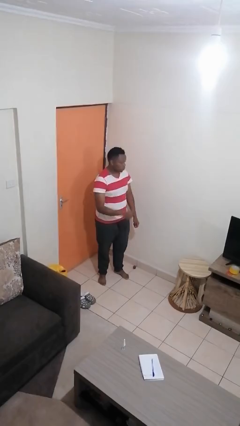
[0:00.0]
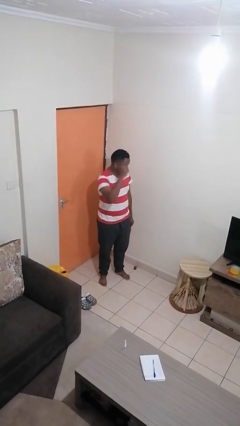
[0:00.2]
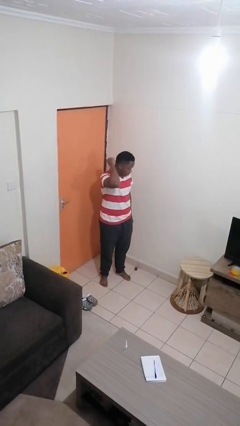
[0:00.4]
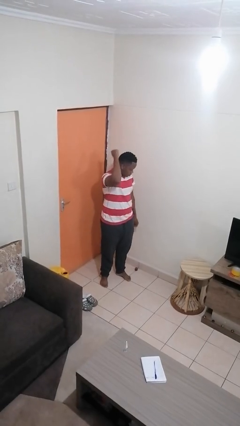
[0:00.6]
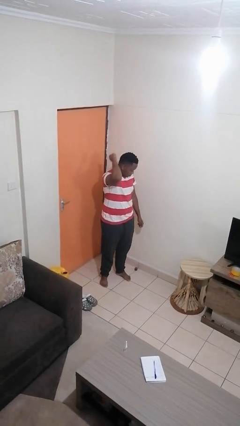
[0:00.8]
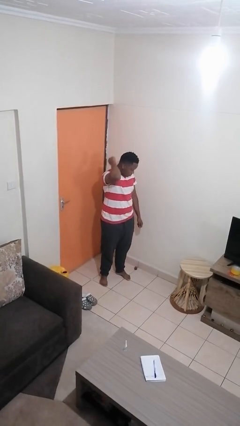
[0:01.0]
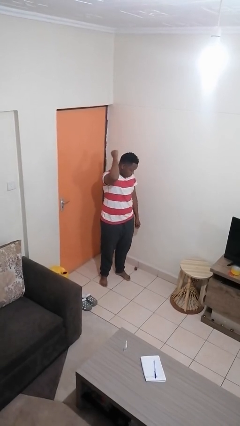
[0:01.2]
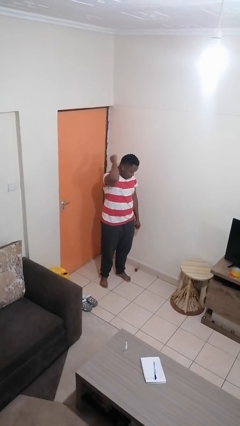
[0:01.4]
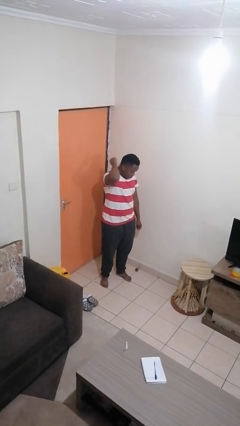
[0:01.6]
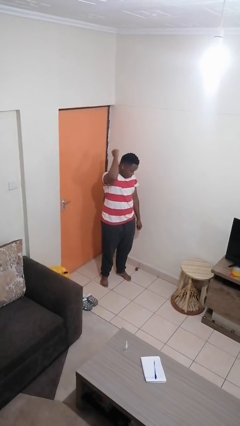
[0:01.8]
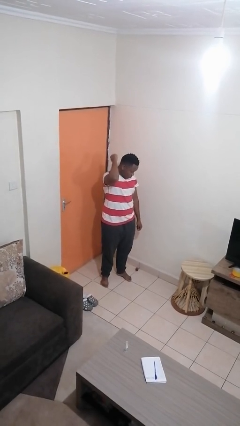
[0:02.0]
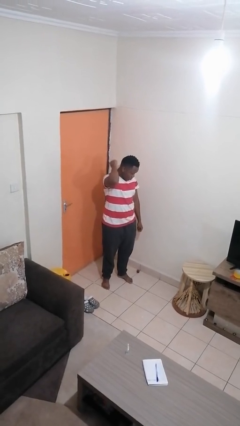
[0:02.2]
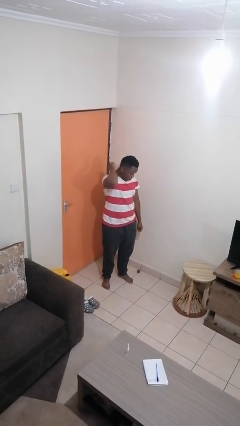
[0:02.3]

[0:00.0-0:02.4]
person gestures behind me

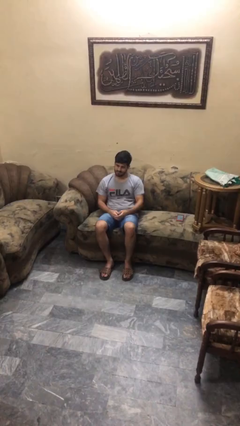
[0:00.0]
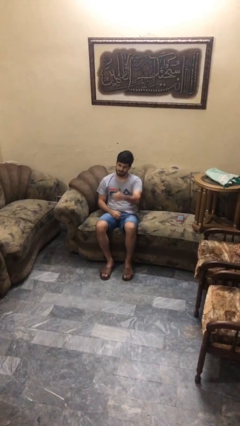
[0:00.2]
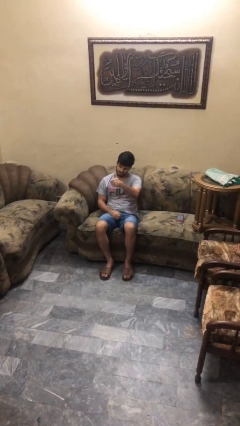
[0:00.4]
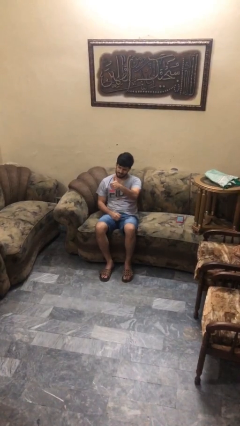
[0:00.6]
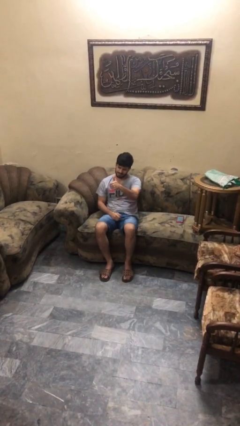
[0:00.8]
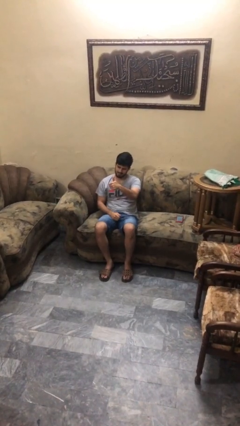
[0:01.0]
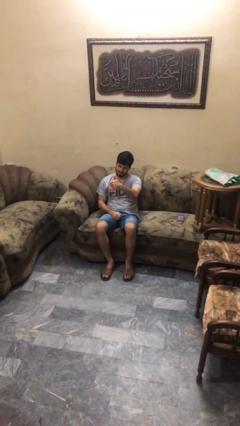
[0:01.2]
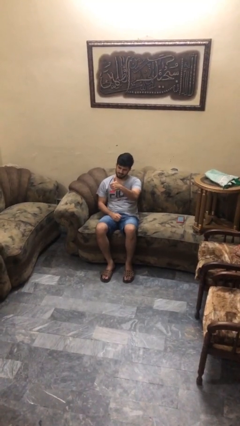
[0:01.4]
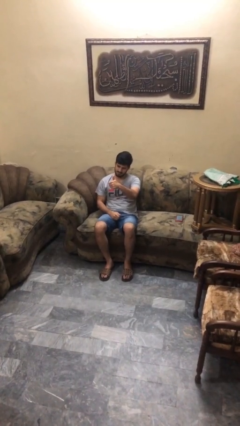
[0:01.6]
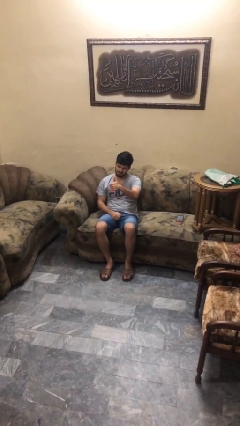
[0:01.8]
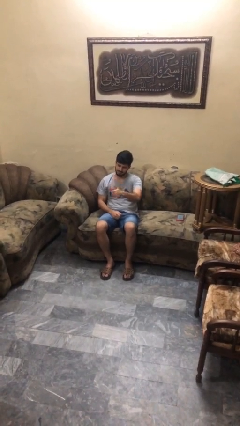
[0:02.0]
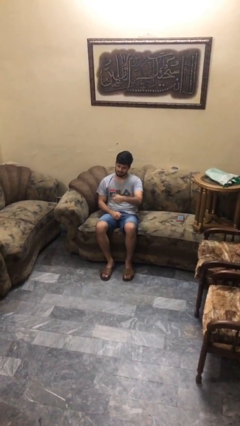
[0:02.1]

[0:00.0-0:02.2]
person gestures thumbs up

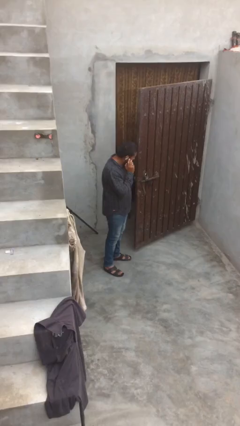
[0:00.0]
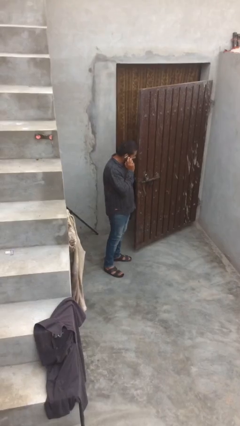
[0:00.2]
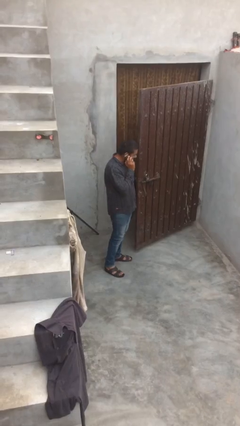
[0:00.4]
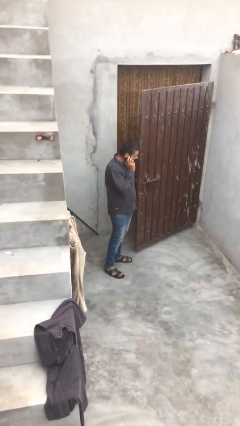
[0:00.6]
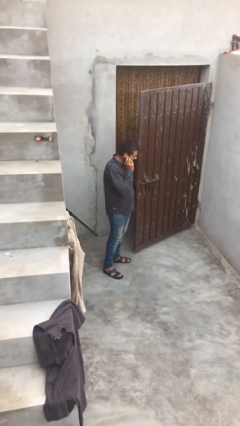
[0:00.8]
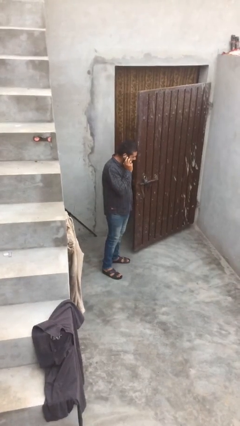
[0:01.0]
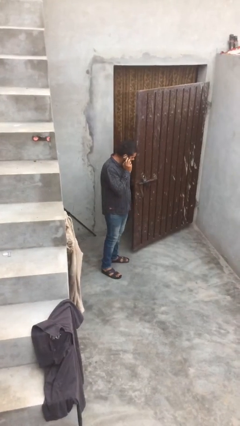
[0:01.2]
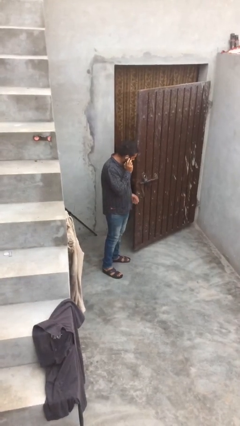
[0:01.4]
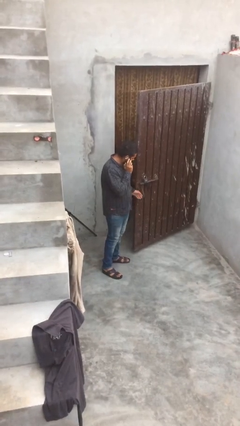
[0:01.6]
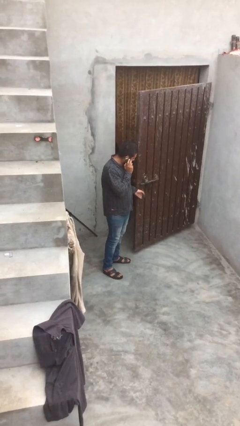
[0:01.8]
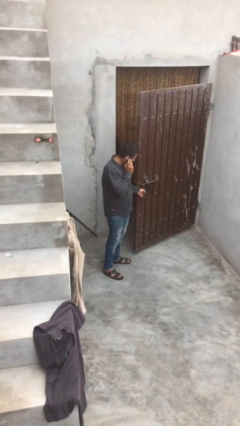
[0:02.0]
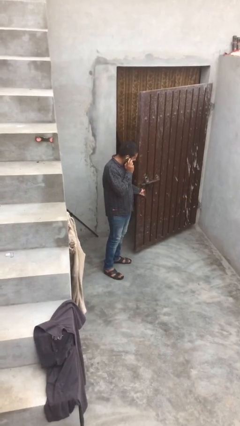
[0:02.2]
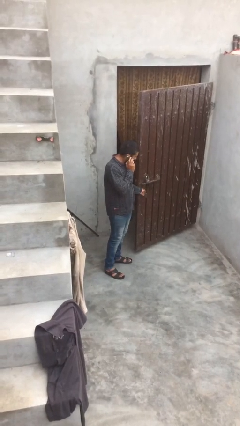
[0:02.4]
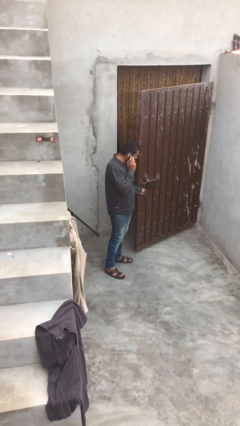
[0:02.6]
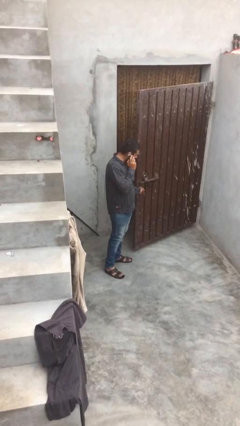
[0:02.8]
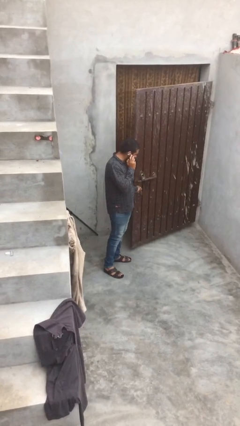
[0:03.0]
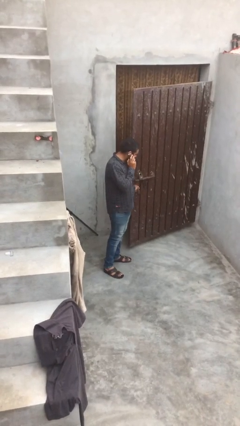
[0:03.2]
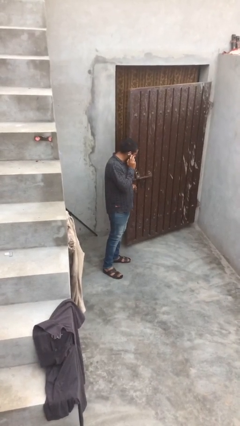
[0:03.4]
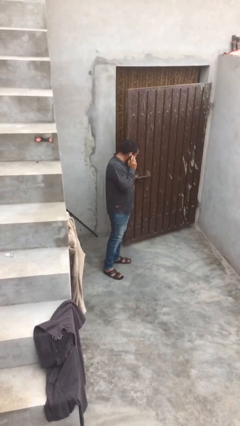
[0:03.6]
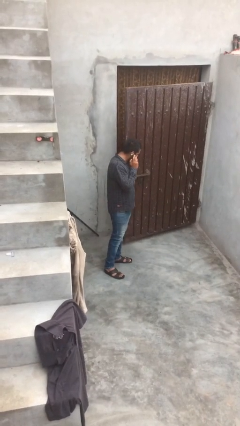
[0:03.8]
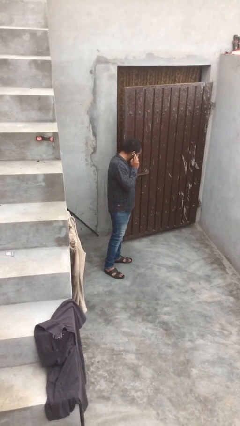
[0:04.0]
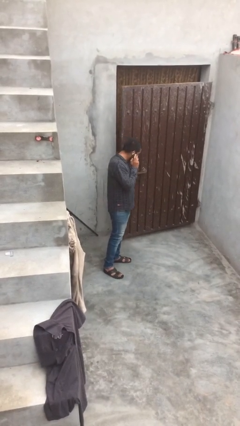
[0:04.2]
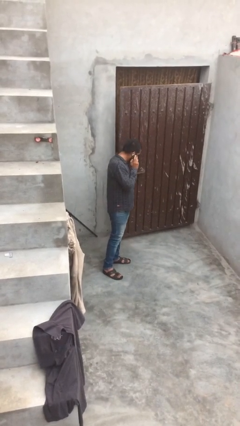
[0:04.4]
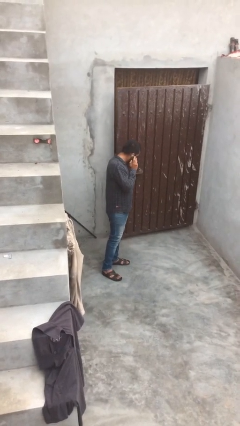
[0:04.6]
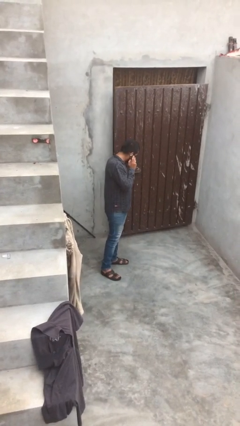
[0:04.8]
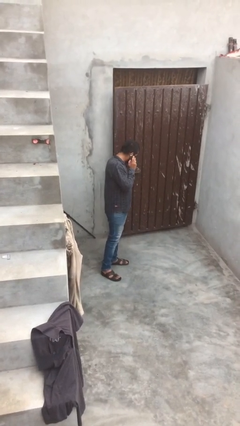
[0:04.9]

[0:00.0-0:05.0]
person closes facility door

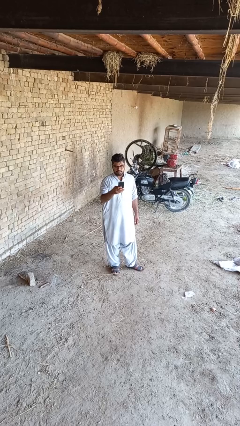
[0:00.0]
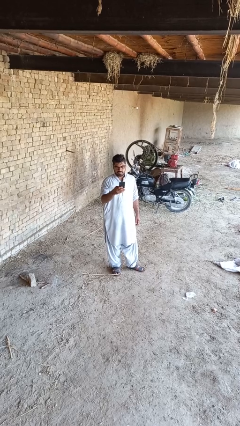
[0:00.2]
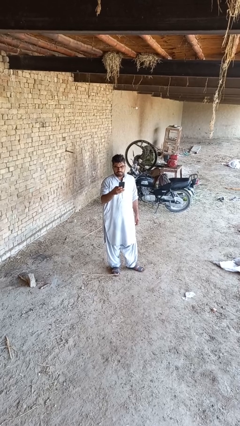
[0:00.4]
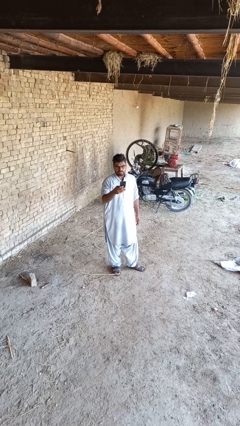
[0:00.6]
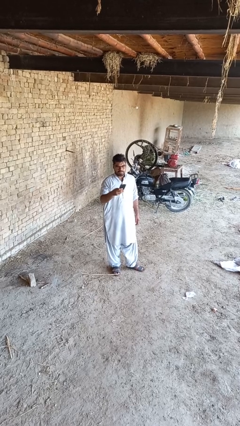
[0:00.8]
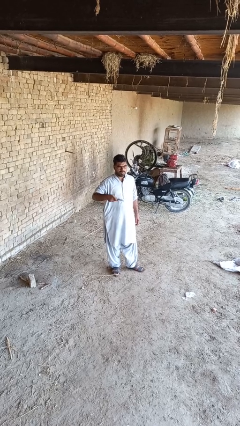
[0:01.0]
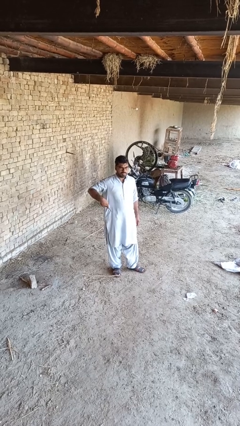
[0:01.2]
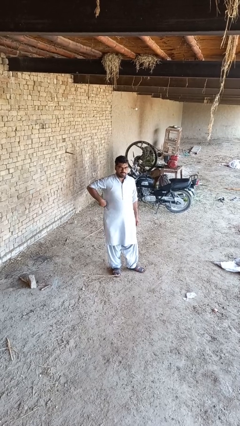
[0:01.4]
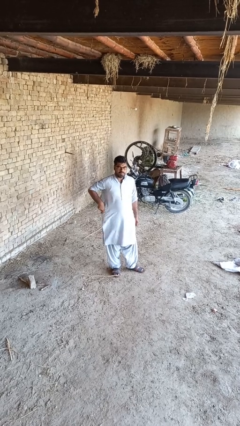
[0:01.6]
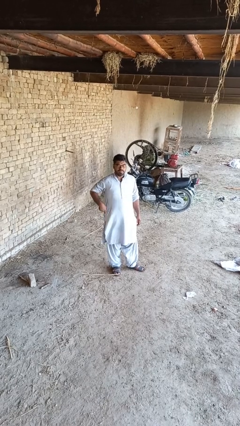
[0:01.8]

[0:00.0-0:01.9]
person puts phone into pocket

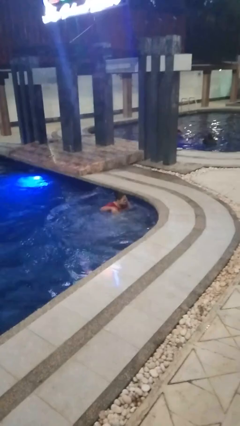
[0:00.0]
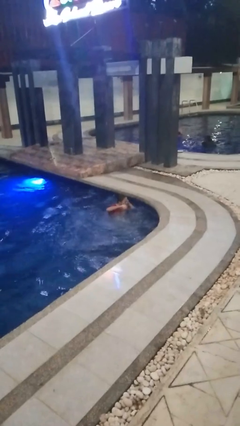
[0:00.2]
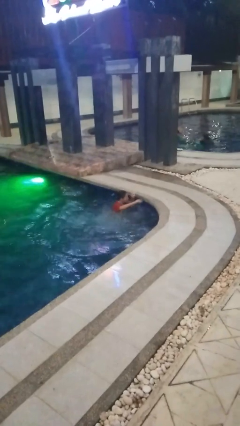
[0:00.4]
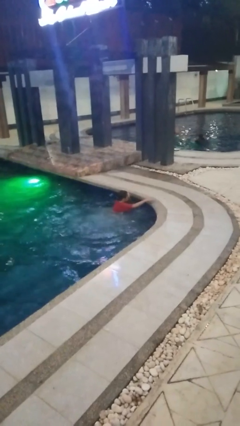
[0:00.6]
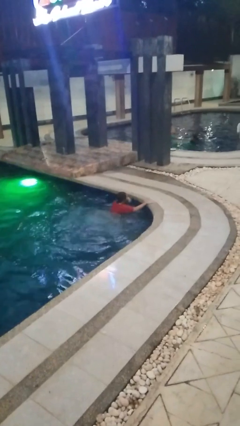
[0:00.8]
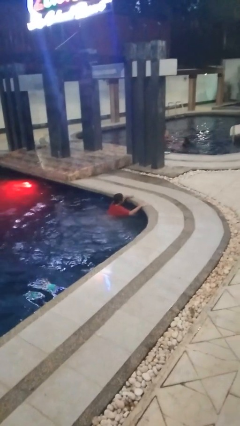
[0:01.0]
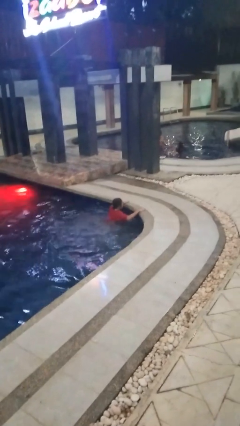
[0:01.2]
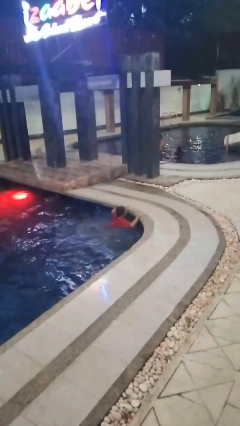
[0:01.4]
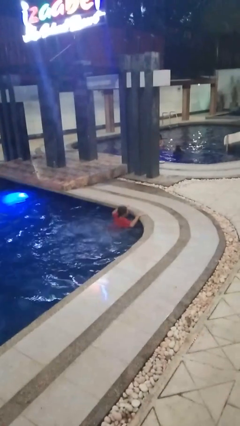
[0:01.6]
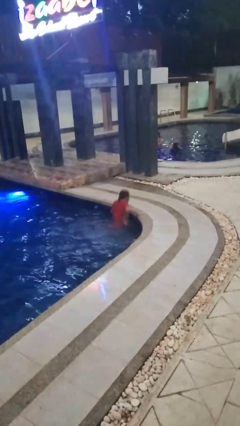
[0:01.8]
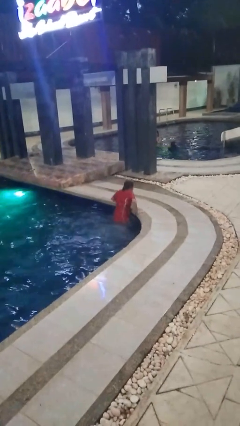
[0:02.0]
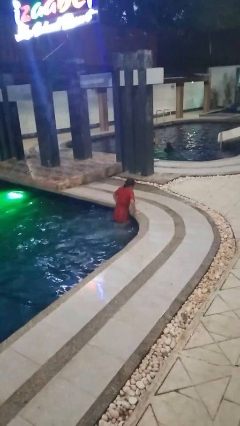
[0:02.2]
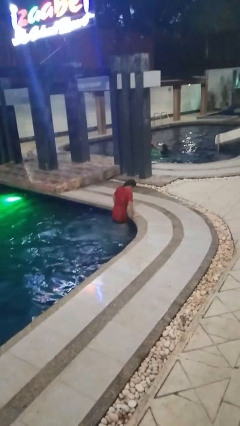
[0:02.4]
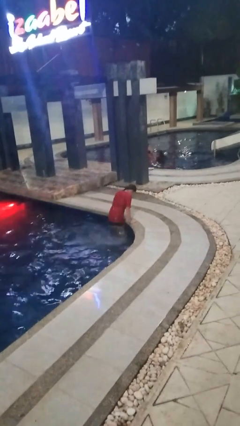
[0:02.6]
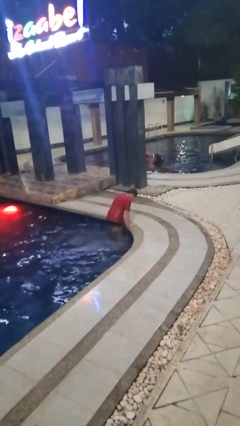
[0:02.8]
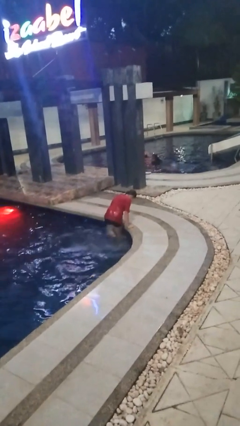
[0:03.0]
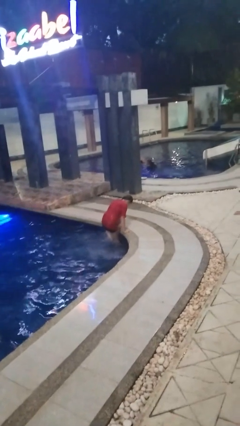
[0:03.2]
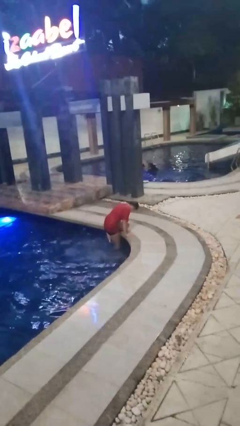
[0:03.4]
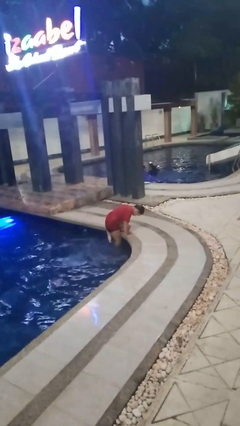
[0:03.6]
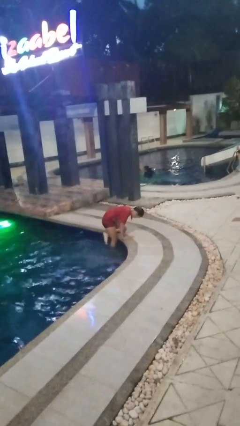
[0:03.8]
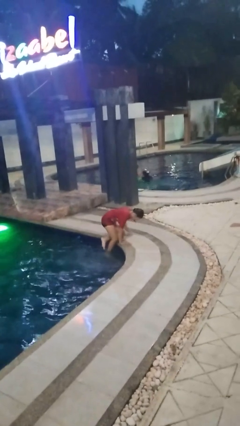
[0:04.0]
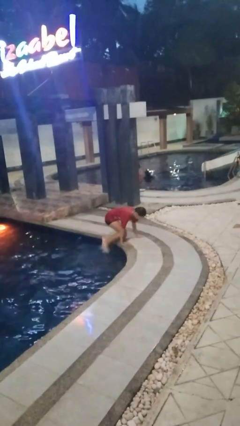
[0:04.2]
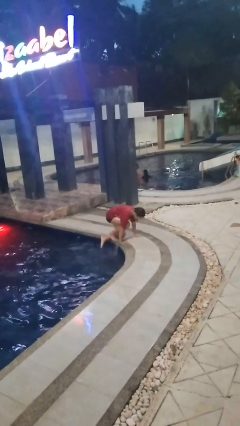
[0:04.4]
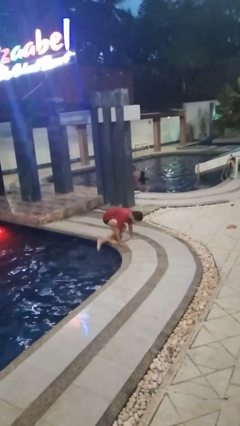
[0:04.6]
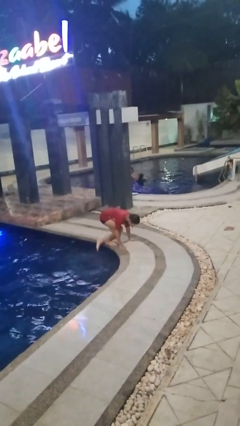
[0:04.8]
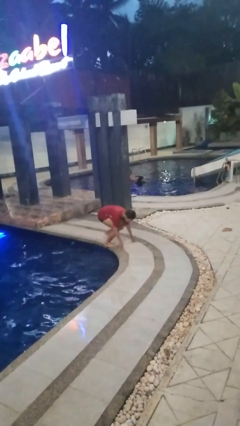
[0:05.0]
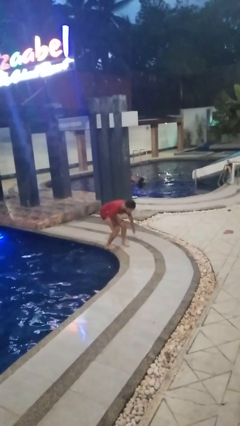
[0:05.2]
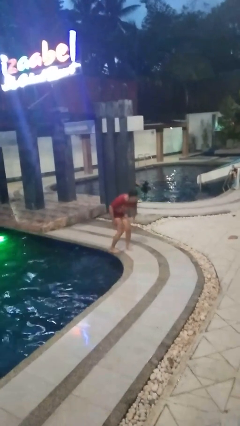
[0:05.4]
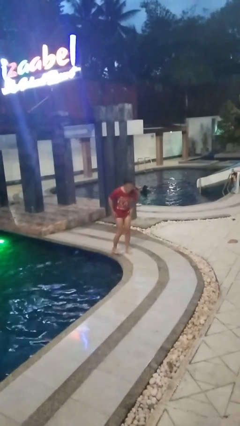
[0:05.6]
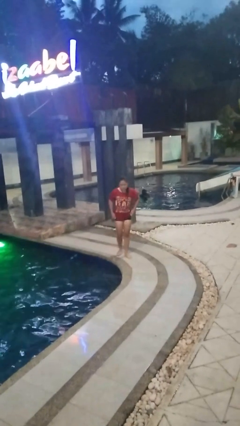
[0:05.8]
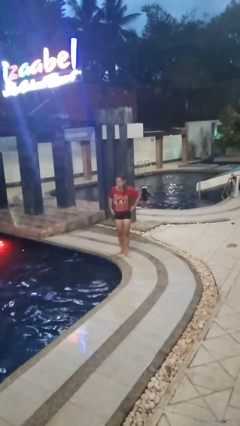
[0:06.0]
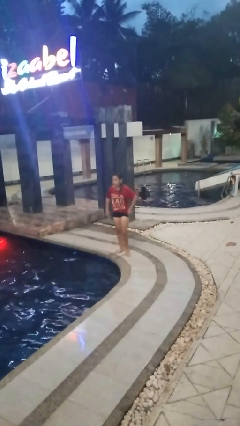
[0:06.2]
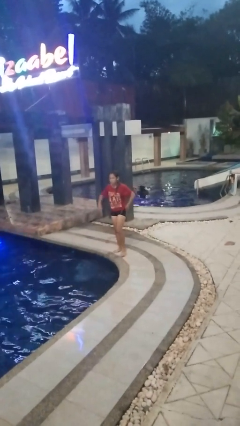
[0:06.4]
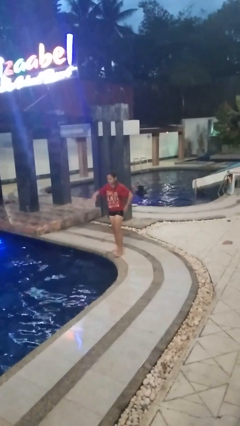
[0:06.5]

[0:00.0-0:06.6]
person exits pool
